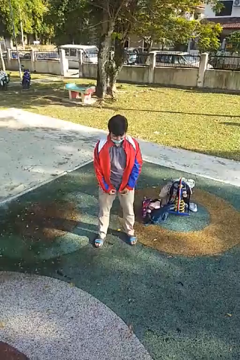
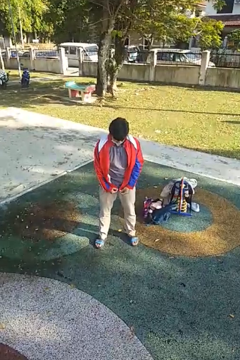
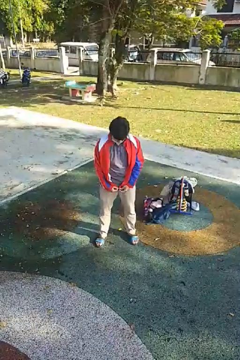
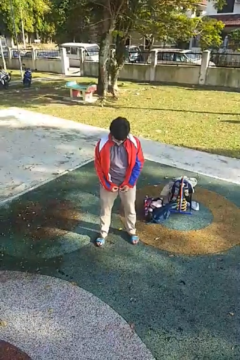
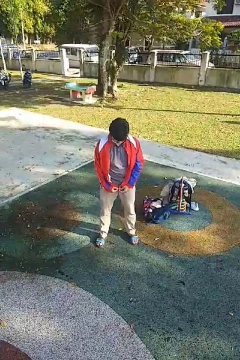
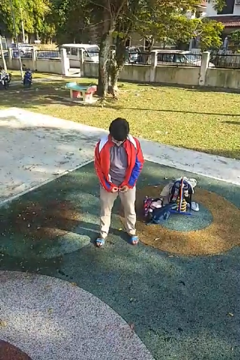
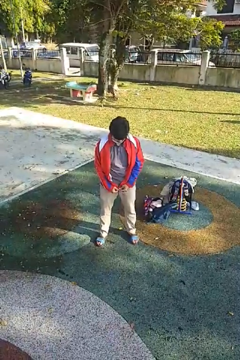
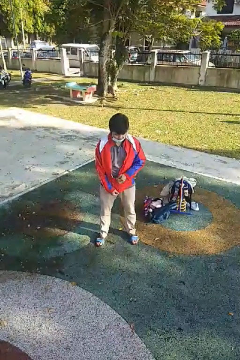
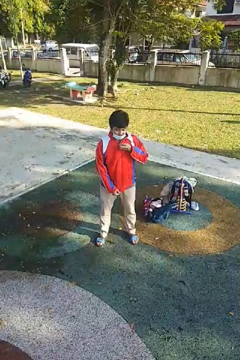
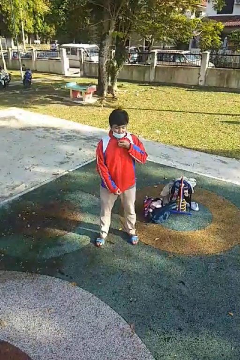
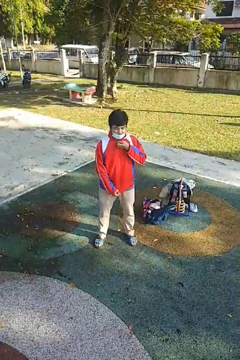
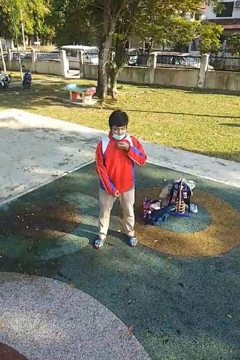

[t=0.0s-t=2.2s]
person zips up jacket

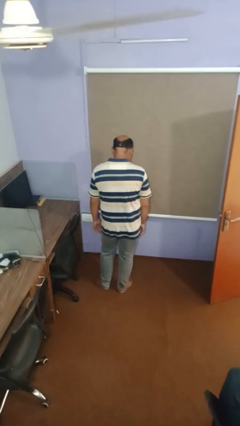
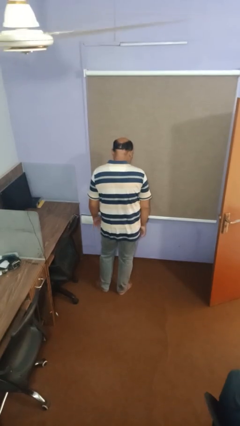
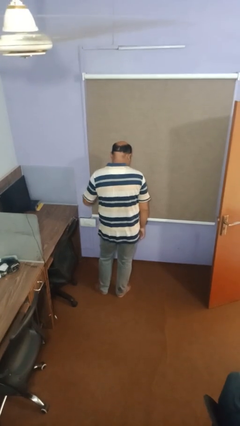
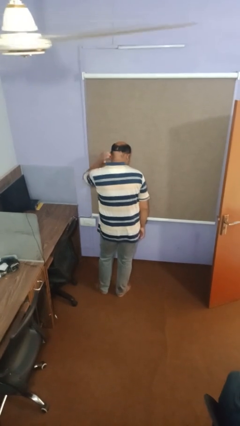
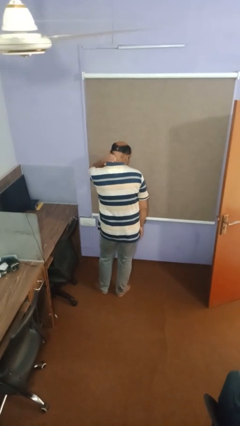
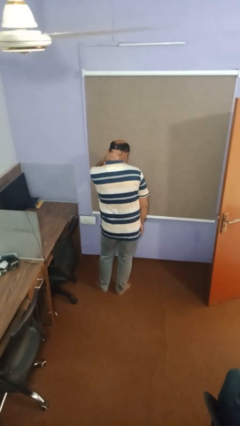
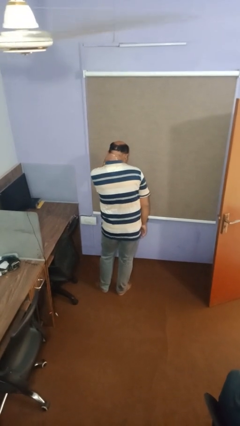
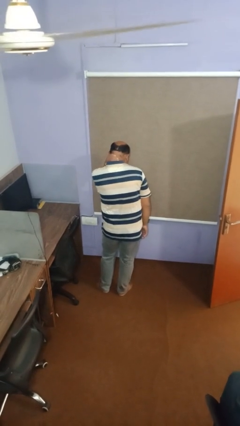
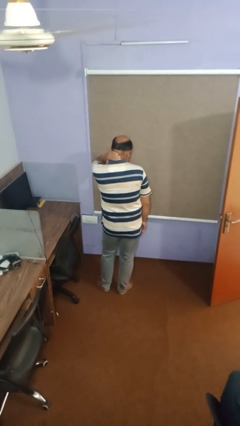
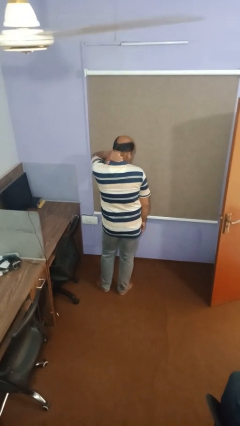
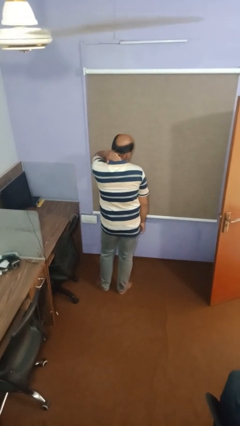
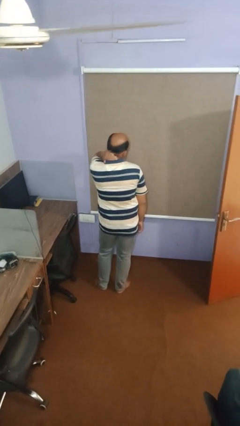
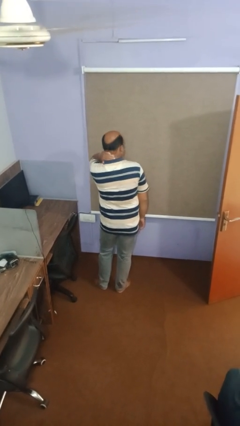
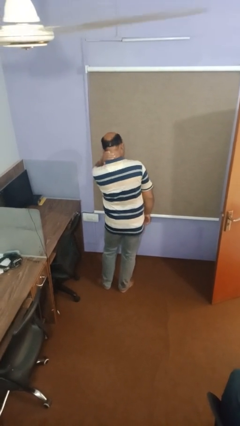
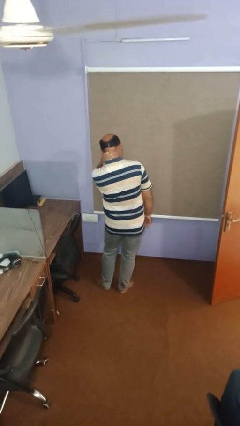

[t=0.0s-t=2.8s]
person cracks knuckles

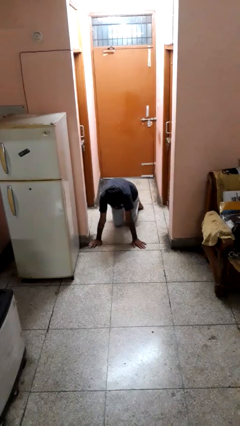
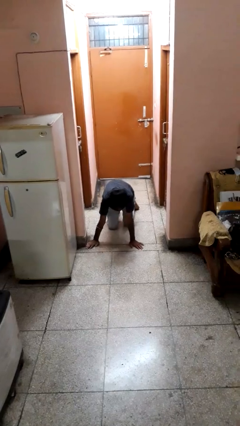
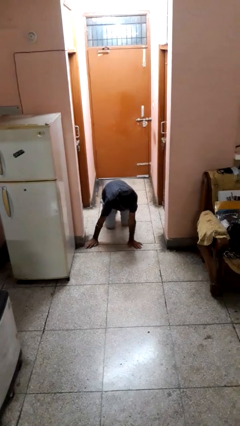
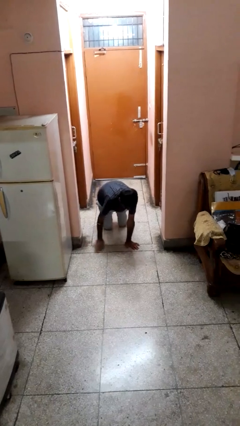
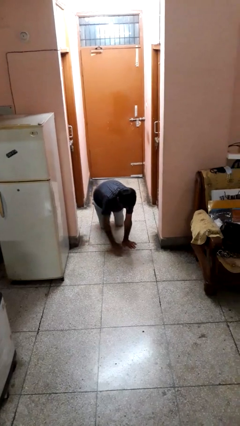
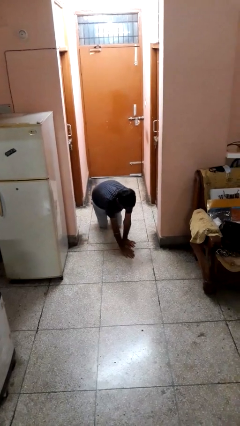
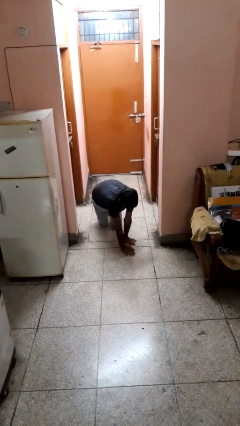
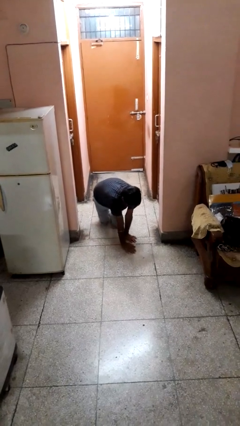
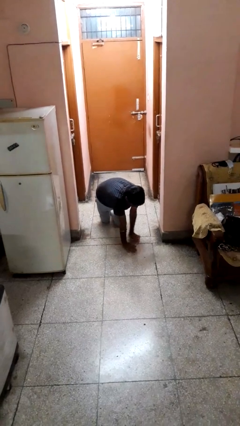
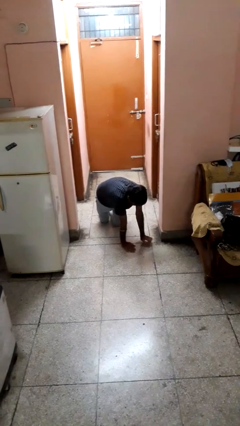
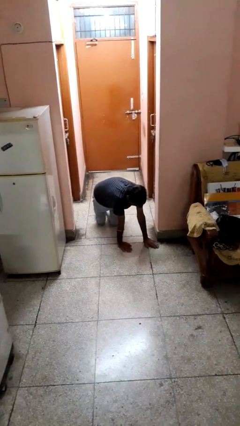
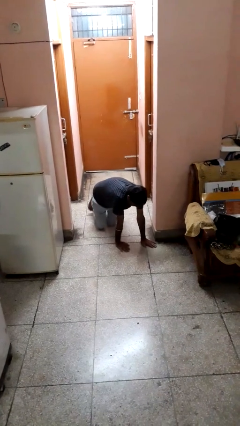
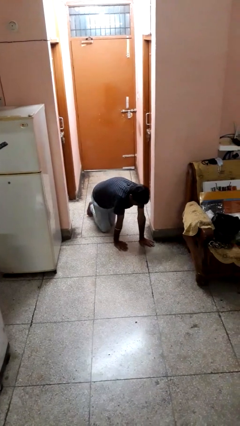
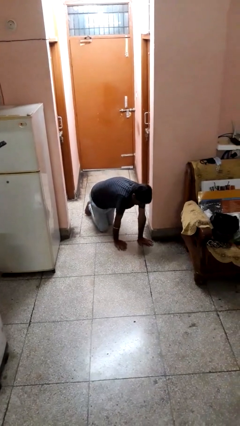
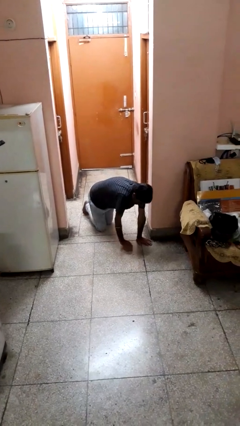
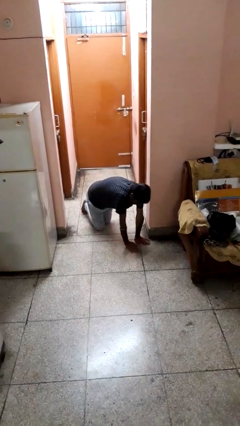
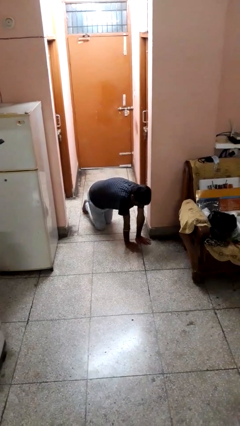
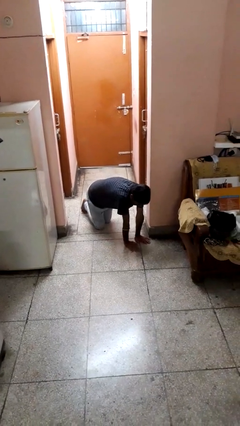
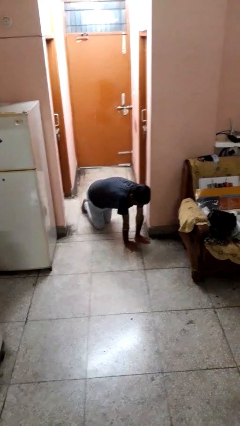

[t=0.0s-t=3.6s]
person crawls

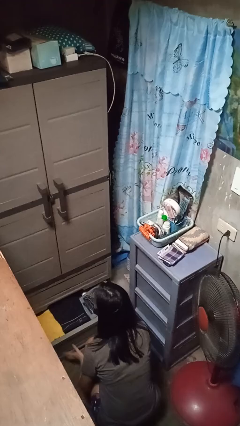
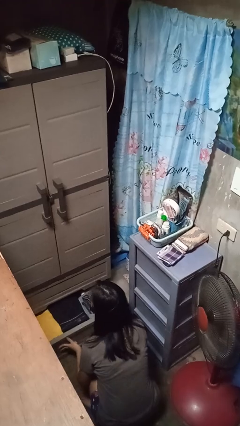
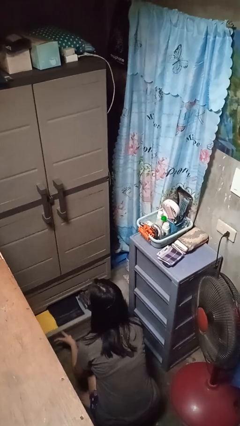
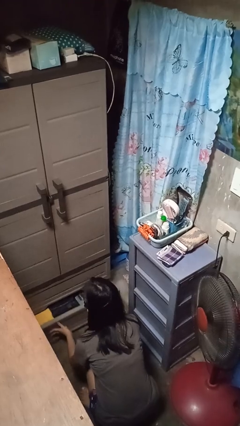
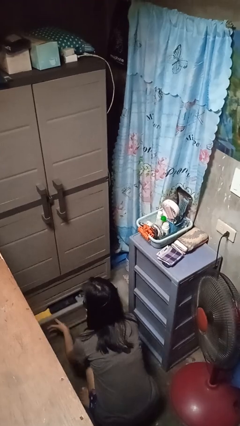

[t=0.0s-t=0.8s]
person closes dresser drawer

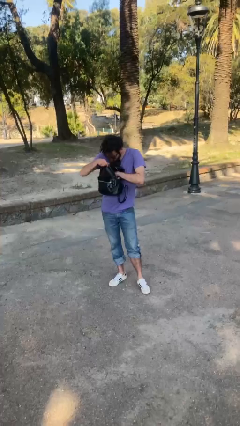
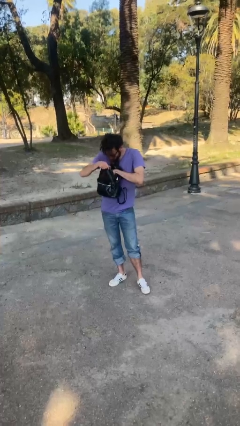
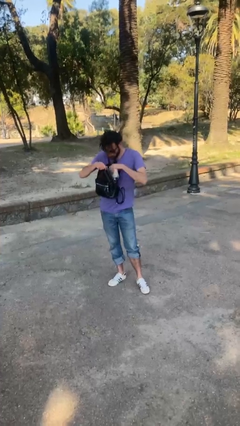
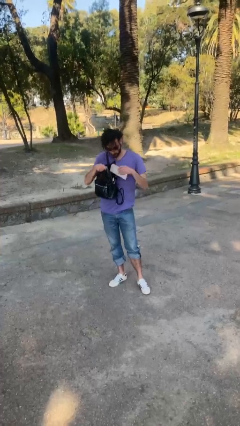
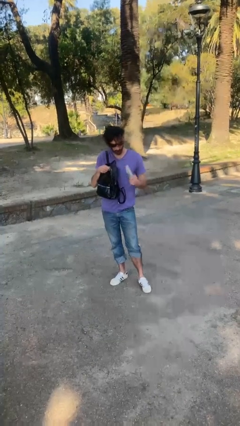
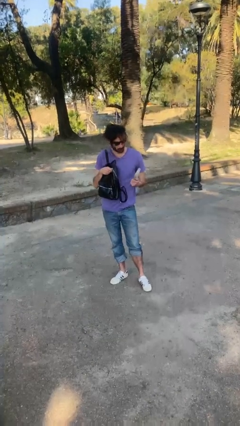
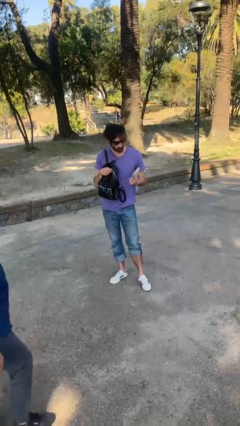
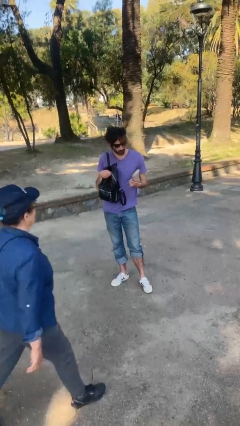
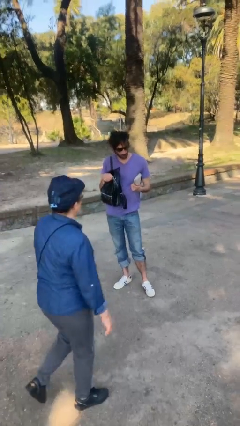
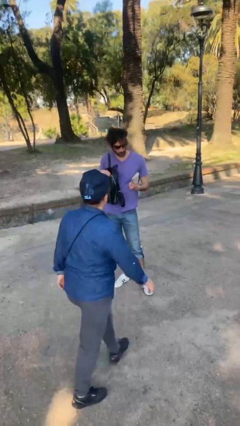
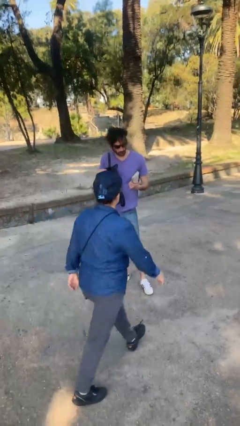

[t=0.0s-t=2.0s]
person takes object from purse

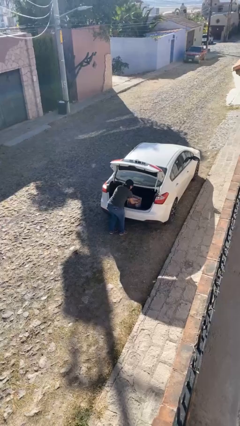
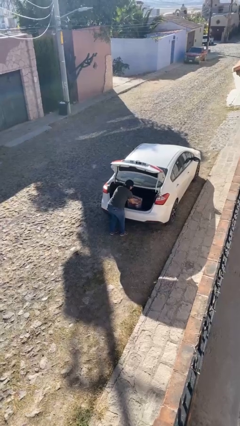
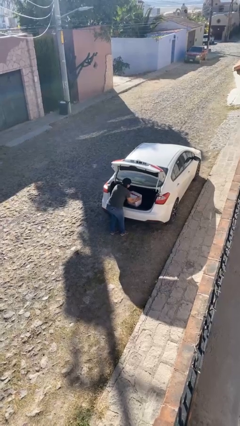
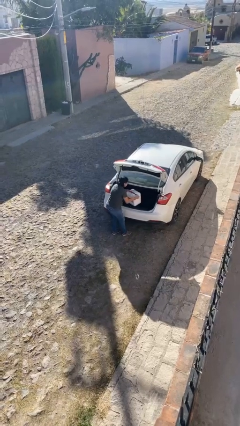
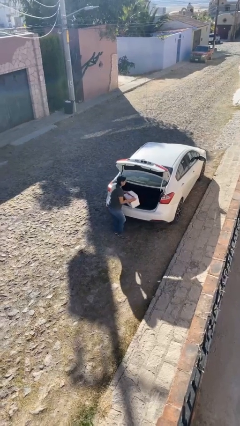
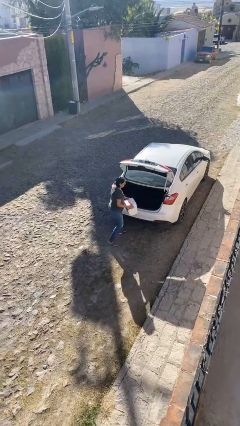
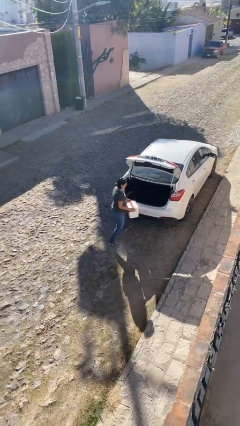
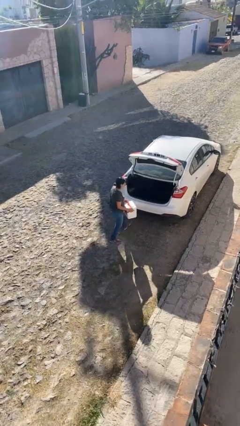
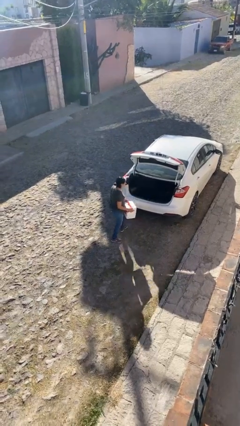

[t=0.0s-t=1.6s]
person unloads car

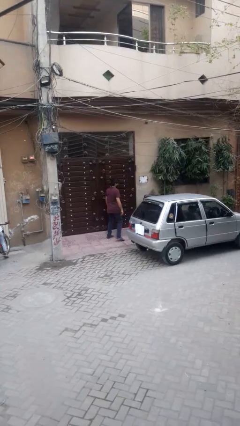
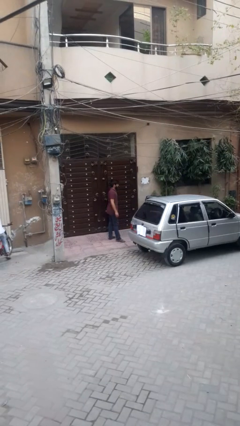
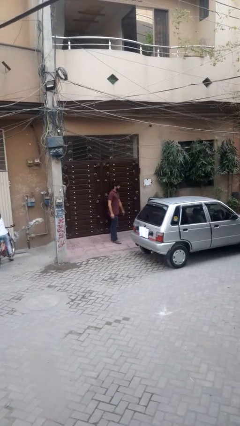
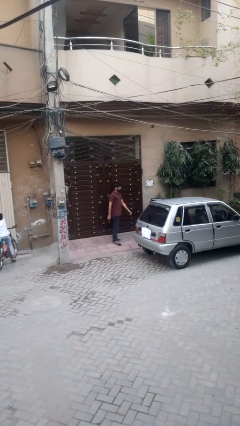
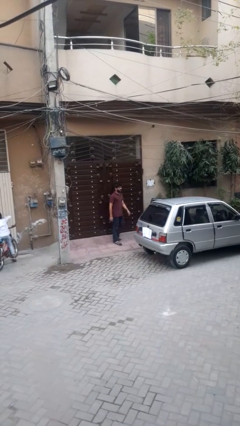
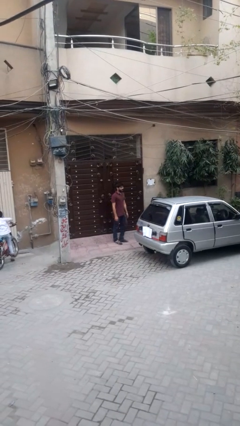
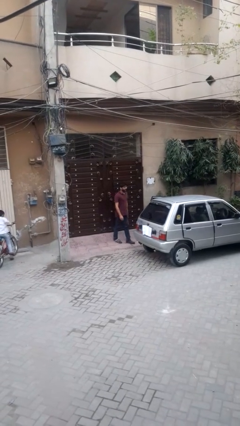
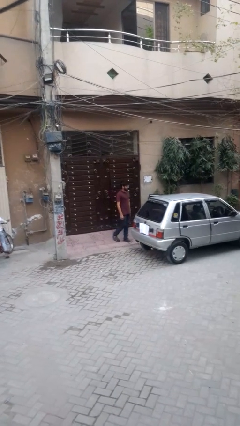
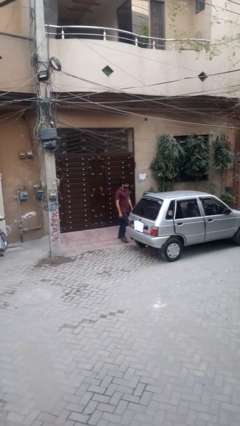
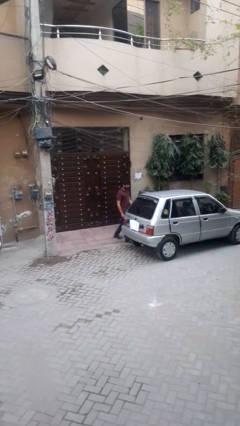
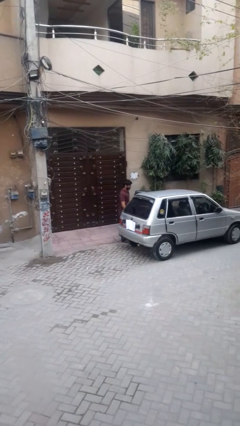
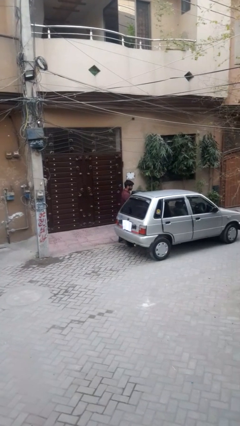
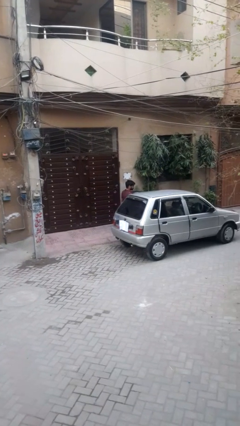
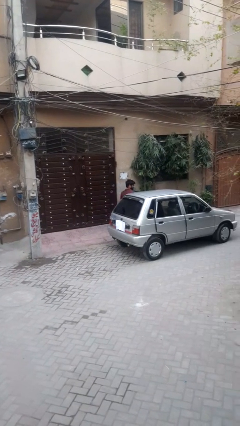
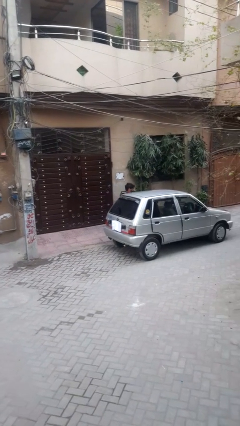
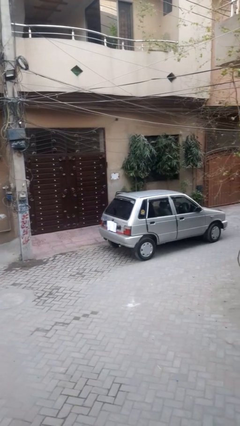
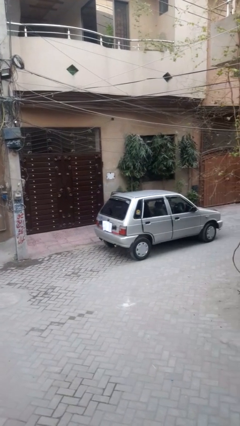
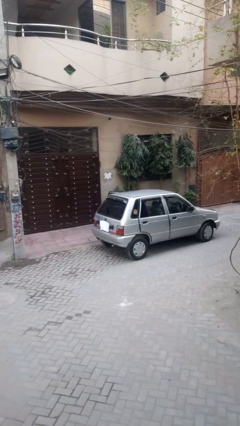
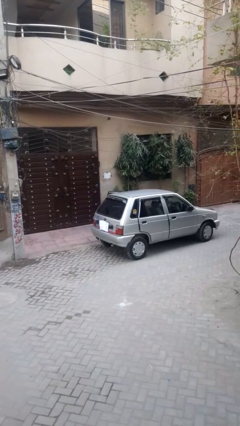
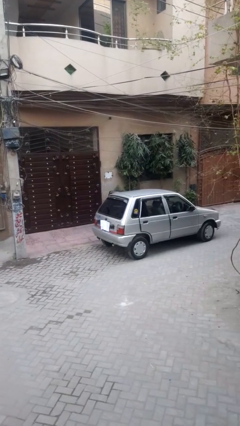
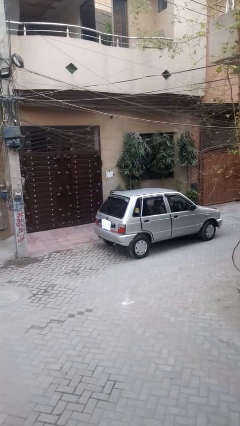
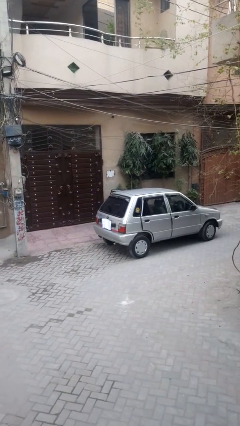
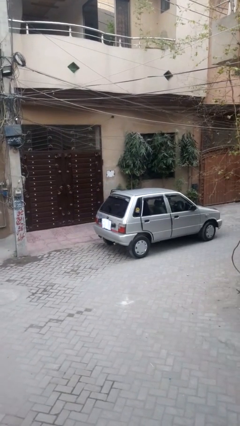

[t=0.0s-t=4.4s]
person enters car

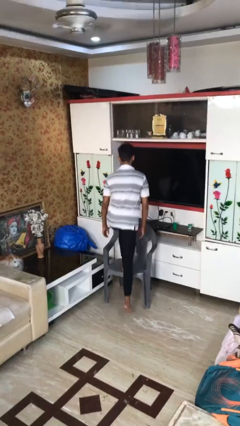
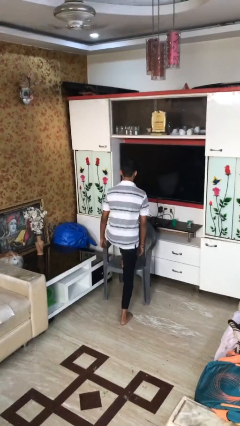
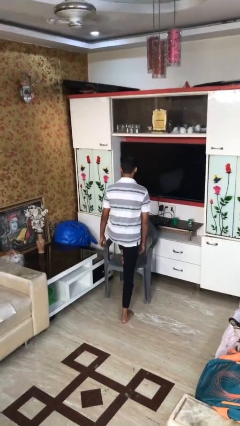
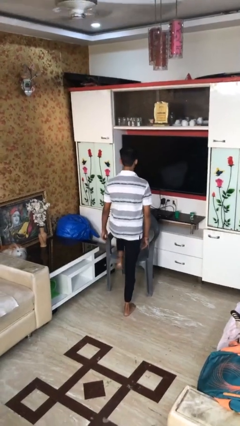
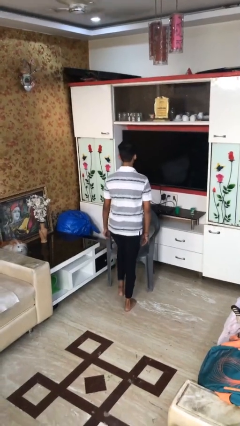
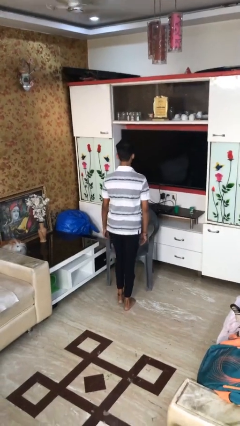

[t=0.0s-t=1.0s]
person climbs off chair
